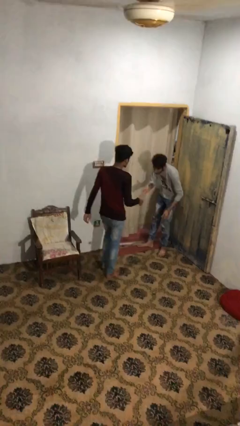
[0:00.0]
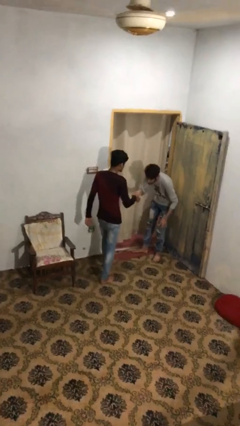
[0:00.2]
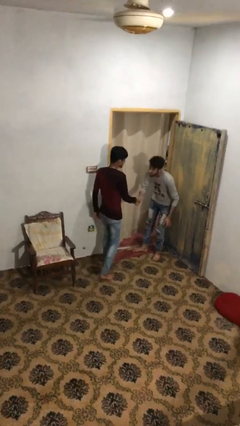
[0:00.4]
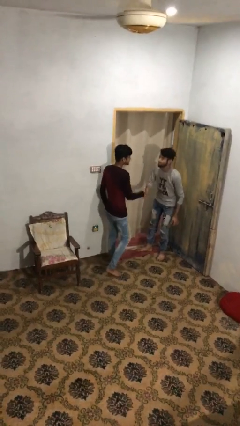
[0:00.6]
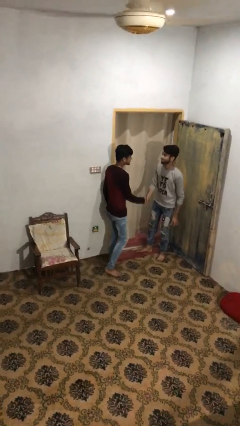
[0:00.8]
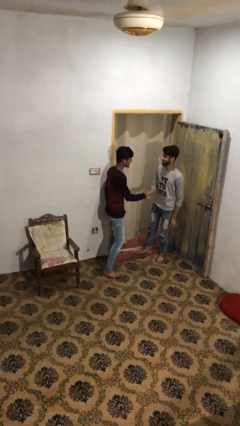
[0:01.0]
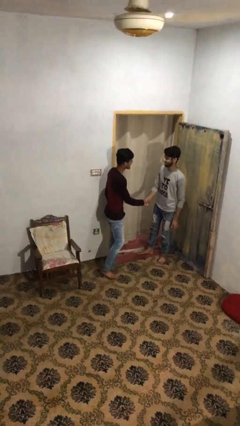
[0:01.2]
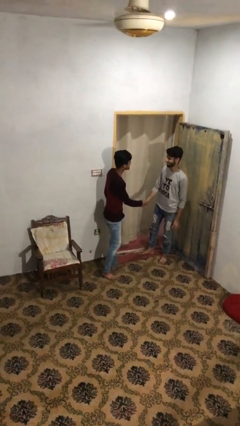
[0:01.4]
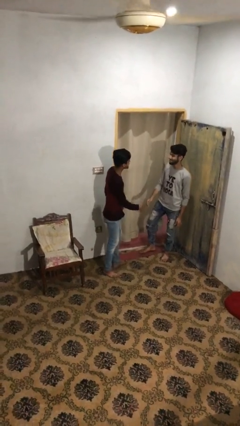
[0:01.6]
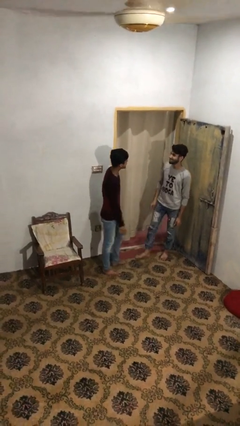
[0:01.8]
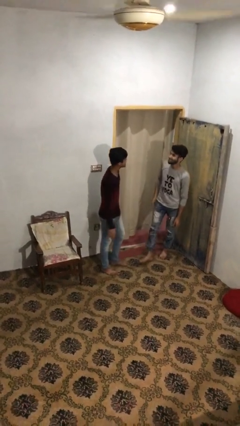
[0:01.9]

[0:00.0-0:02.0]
person shakes hand

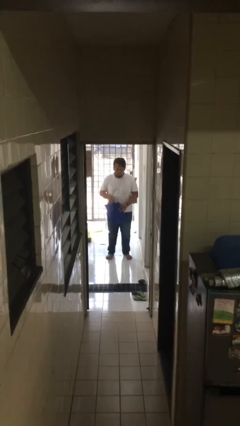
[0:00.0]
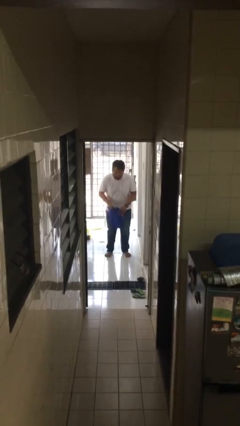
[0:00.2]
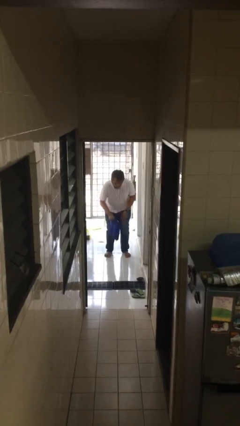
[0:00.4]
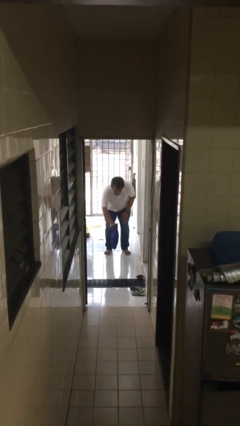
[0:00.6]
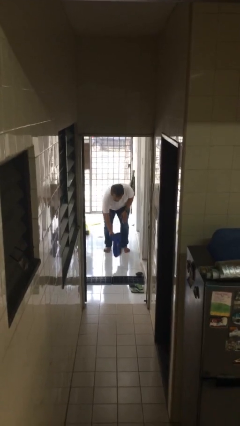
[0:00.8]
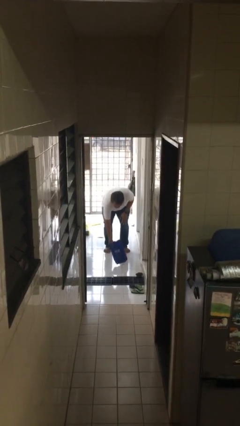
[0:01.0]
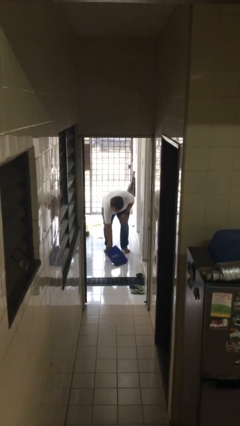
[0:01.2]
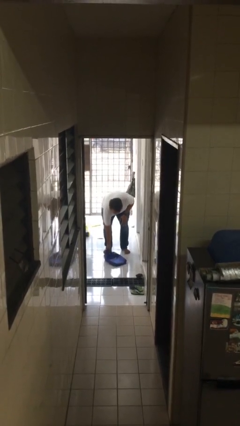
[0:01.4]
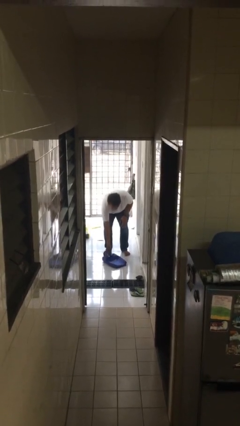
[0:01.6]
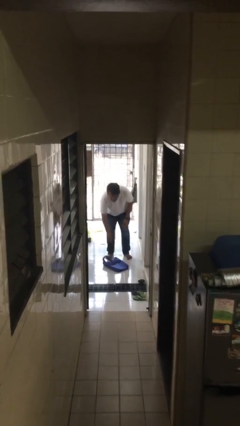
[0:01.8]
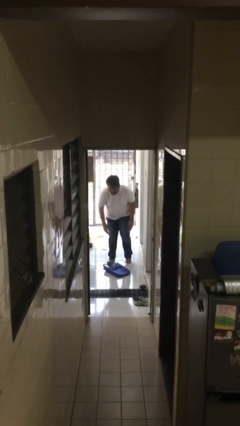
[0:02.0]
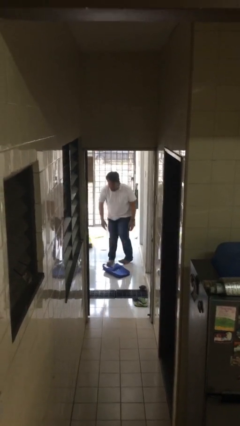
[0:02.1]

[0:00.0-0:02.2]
person puts down object on floor

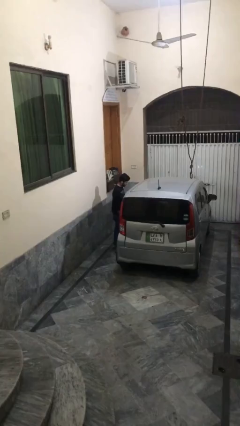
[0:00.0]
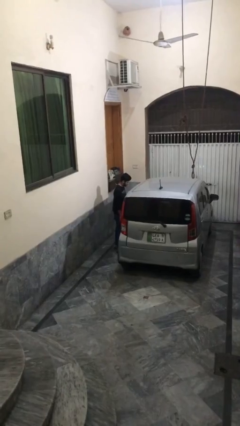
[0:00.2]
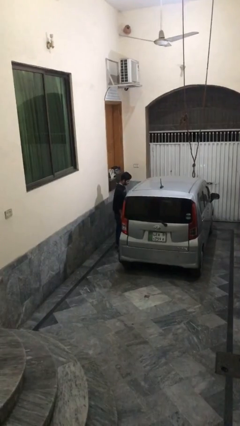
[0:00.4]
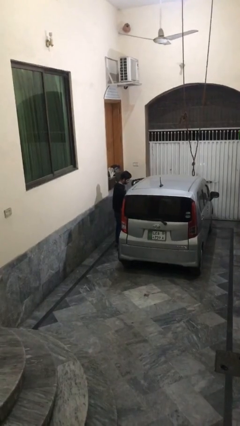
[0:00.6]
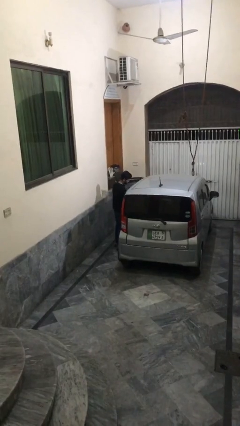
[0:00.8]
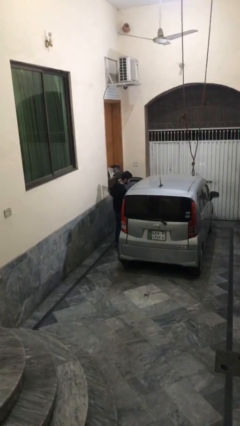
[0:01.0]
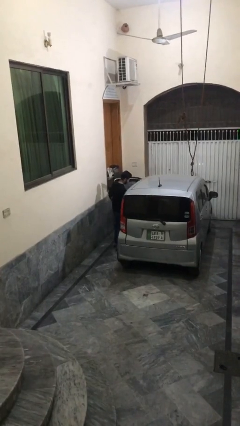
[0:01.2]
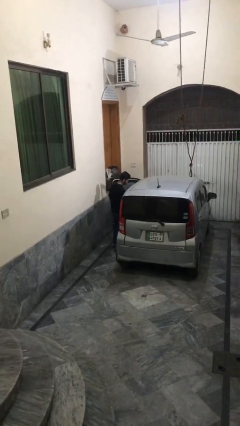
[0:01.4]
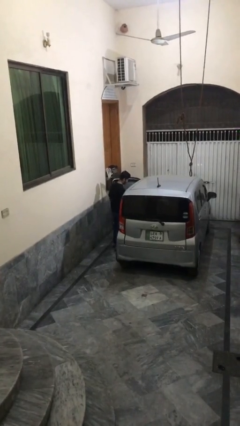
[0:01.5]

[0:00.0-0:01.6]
person opens car door

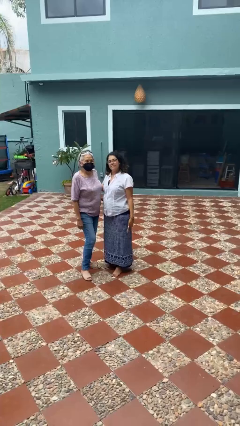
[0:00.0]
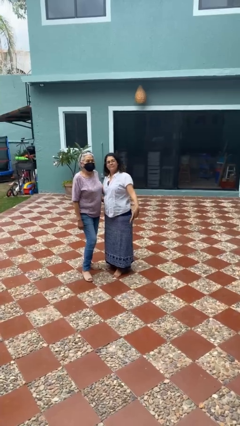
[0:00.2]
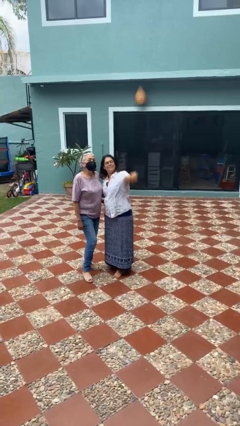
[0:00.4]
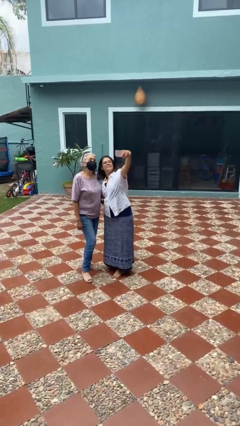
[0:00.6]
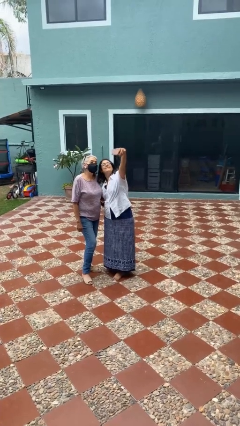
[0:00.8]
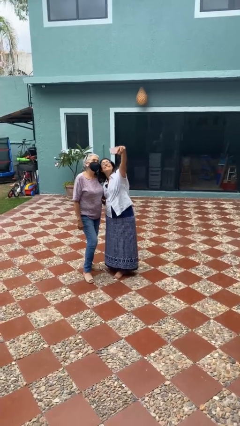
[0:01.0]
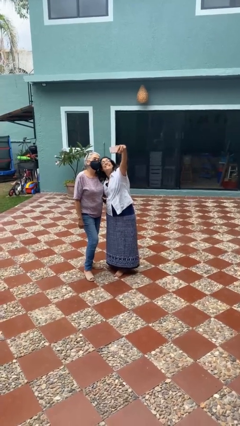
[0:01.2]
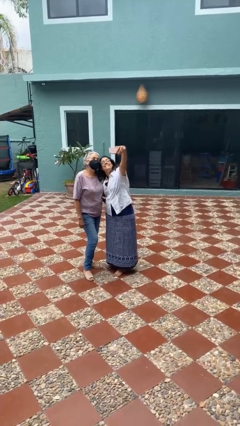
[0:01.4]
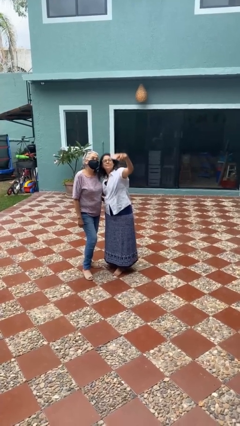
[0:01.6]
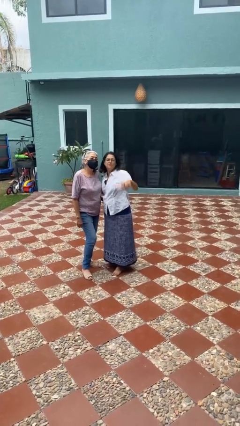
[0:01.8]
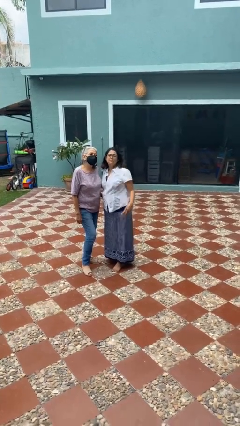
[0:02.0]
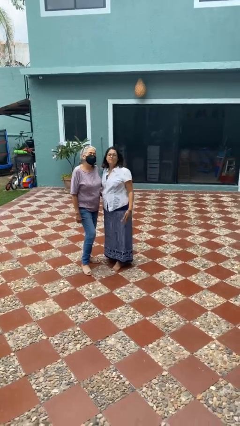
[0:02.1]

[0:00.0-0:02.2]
person takes selfie with person

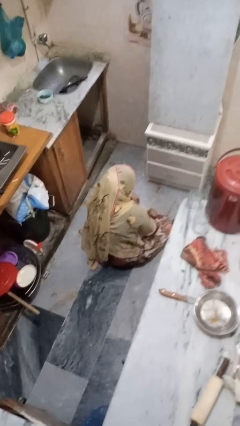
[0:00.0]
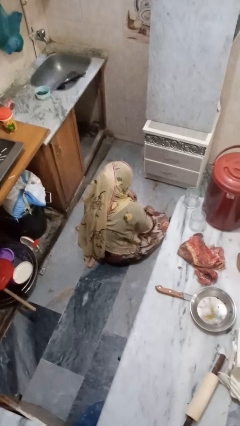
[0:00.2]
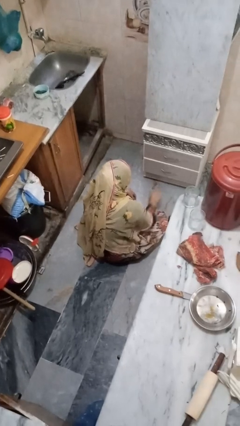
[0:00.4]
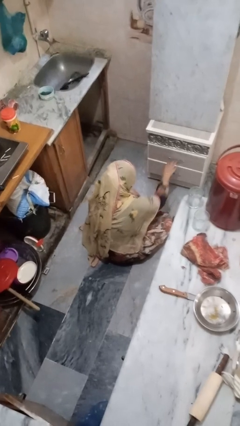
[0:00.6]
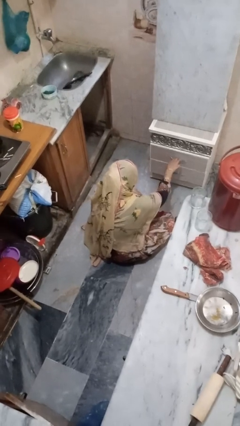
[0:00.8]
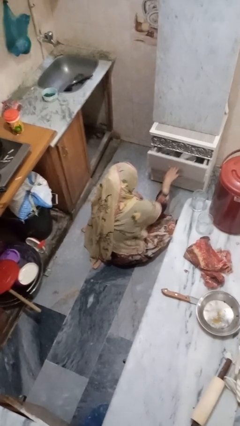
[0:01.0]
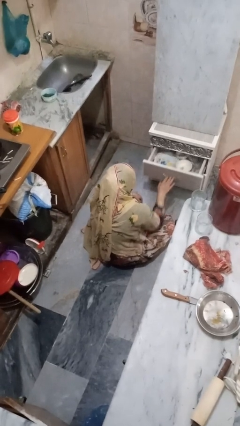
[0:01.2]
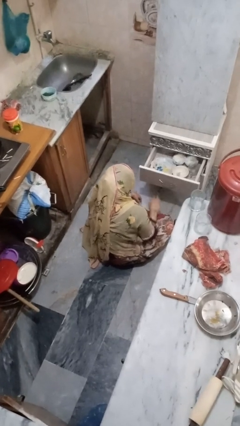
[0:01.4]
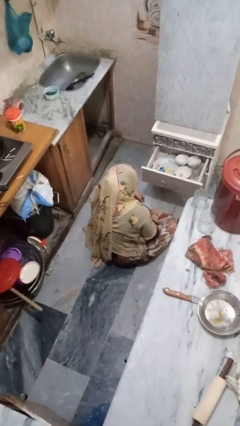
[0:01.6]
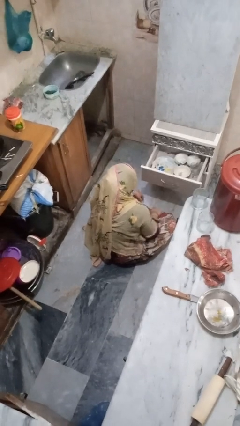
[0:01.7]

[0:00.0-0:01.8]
person opens kitchen drawer

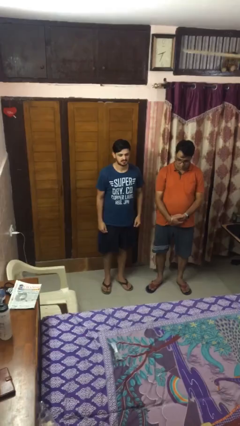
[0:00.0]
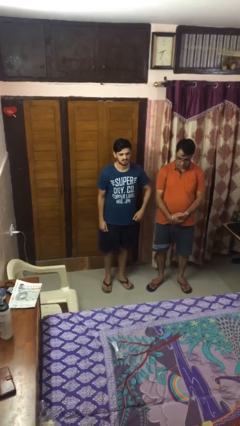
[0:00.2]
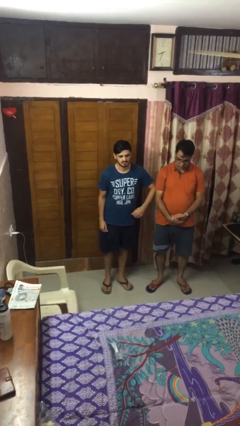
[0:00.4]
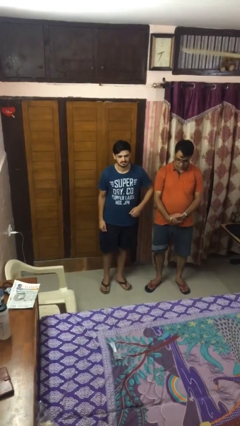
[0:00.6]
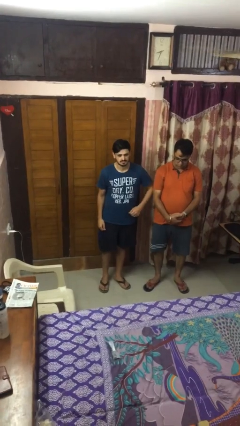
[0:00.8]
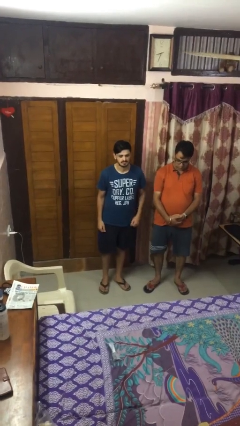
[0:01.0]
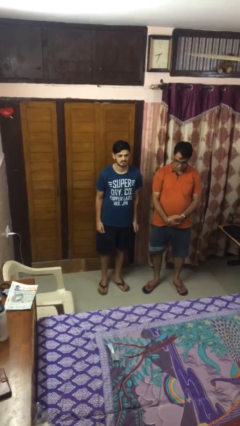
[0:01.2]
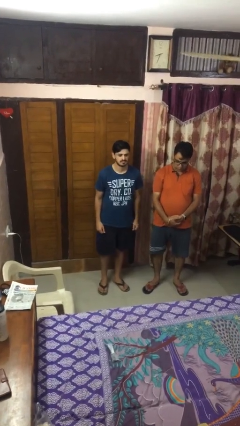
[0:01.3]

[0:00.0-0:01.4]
person nudges person with elbow

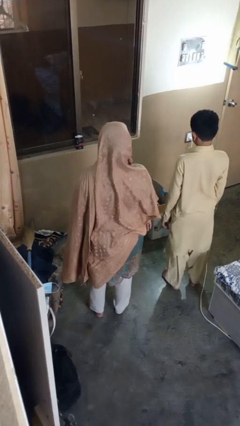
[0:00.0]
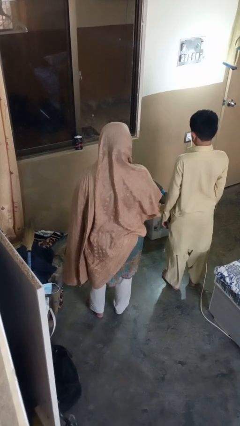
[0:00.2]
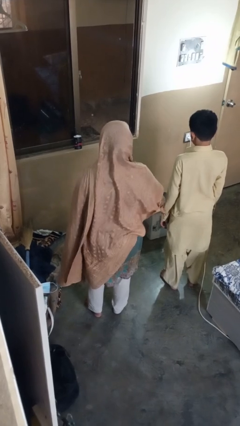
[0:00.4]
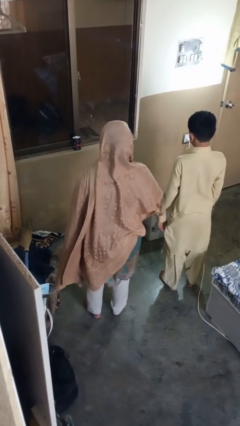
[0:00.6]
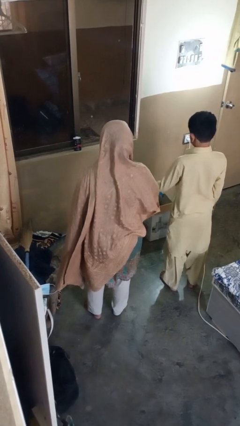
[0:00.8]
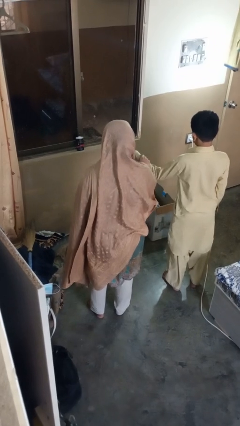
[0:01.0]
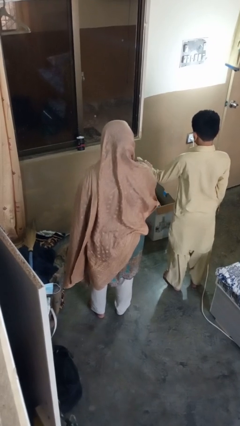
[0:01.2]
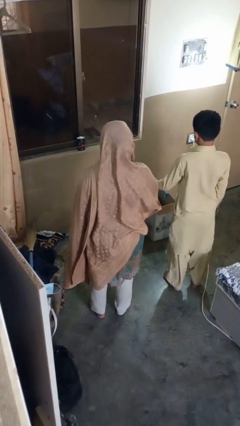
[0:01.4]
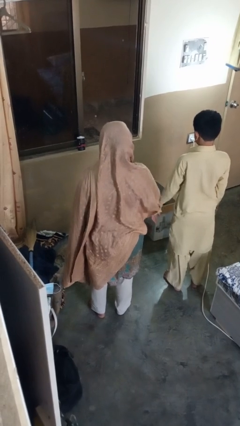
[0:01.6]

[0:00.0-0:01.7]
person grabs person by forearm

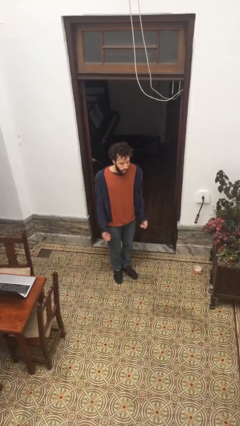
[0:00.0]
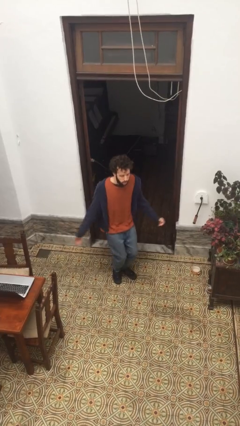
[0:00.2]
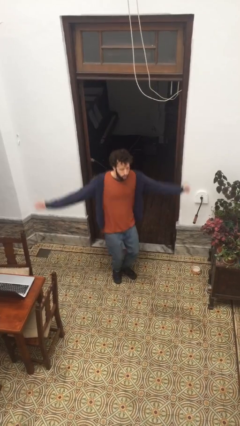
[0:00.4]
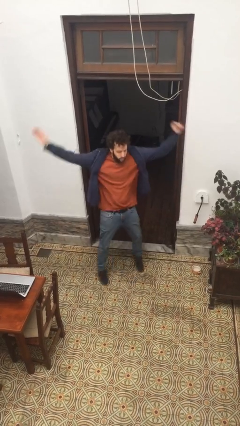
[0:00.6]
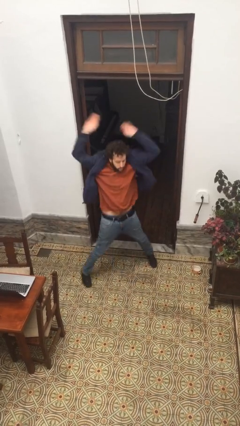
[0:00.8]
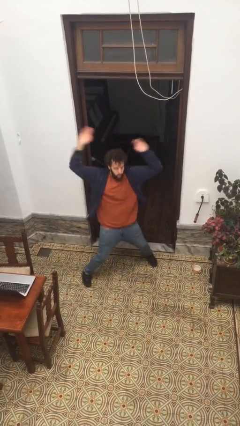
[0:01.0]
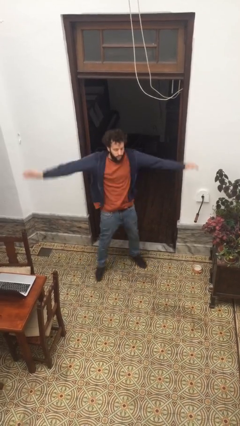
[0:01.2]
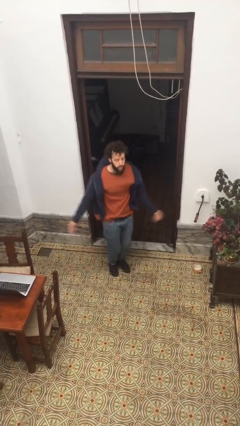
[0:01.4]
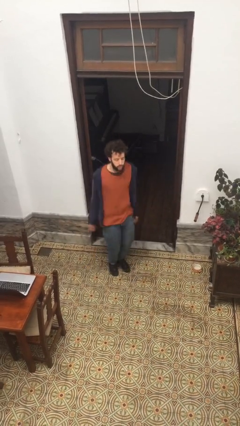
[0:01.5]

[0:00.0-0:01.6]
person exercises with jumping jacks

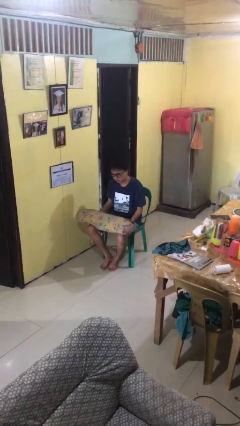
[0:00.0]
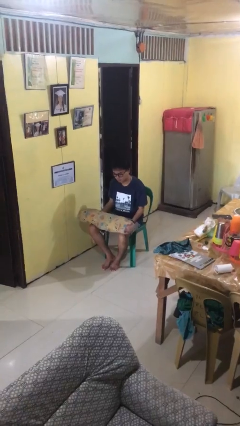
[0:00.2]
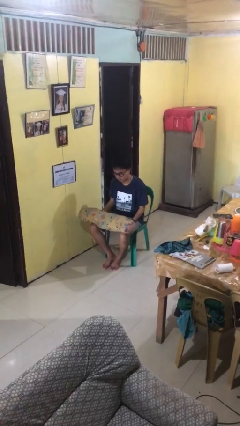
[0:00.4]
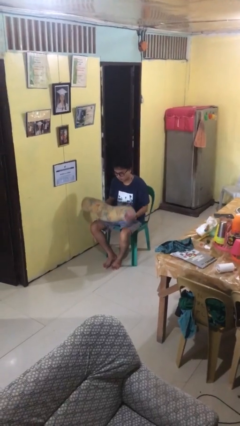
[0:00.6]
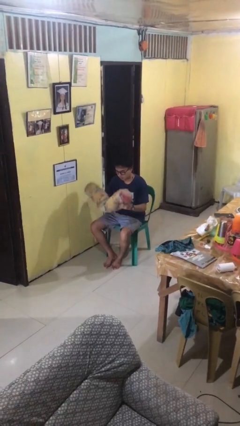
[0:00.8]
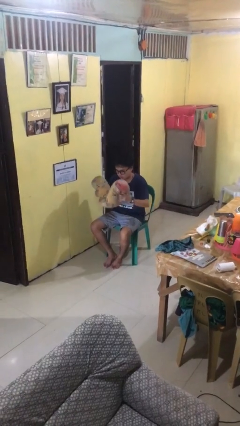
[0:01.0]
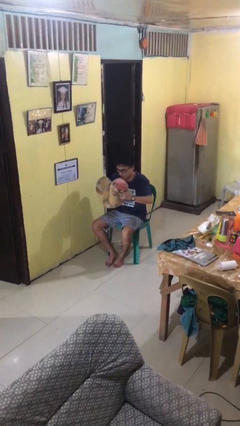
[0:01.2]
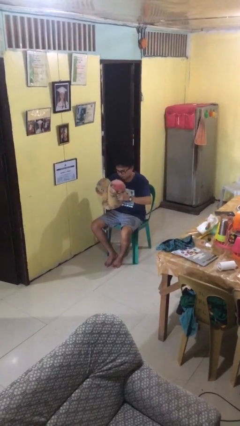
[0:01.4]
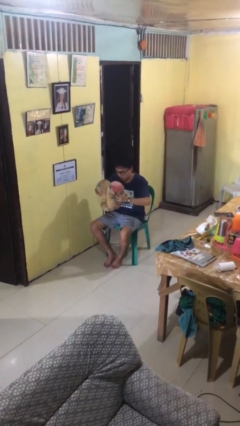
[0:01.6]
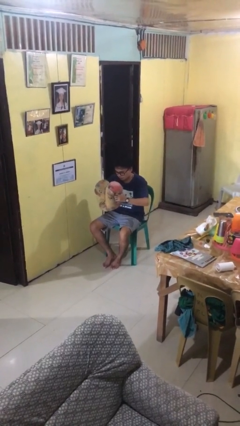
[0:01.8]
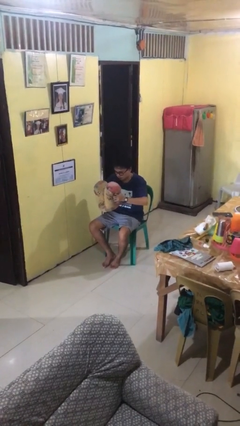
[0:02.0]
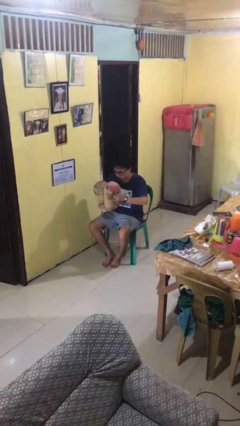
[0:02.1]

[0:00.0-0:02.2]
person squeezes object
